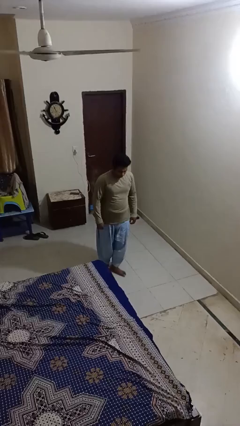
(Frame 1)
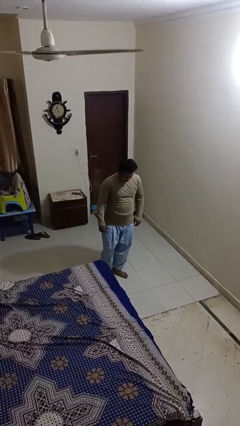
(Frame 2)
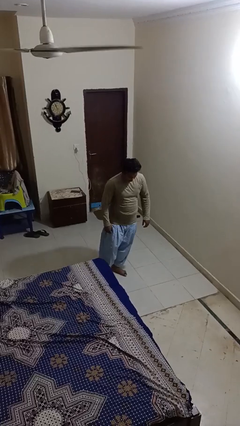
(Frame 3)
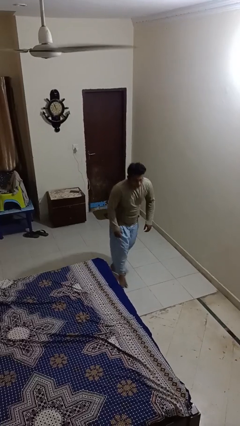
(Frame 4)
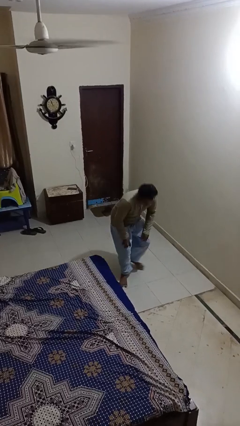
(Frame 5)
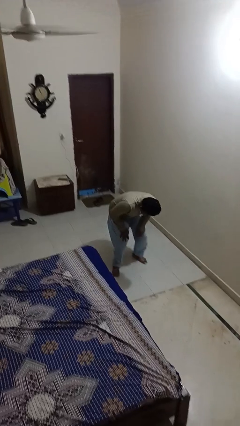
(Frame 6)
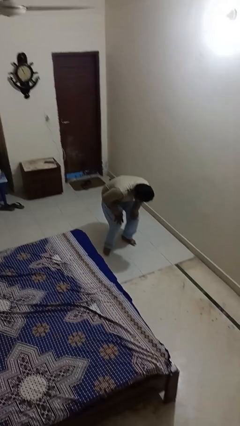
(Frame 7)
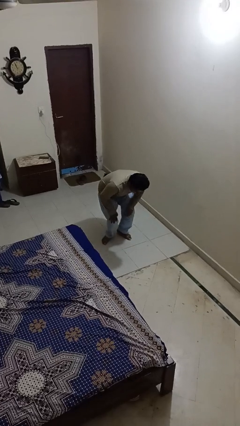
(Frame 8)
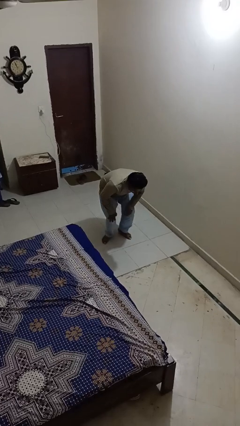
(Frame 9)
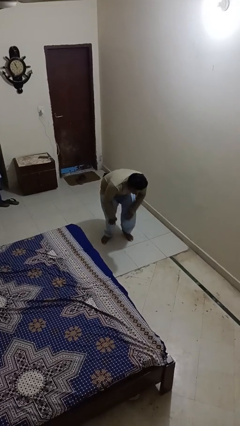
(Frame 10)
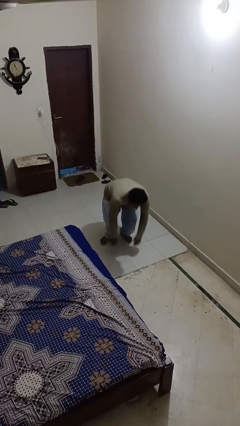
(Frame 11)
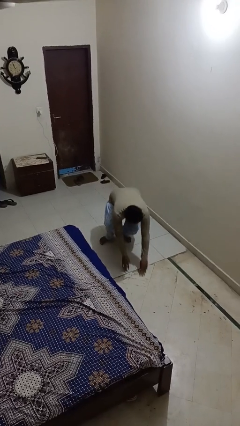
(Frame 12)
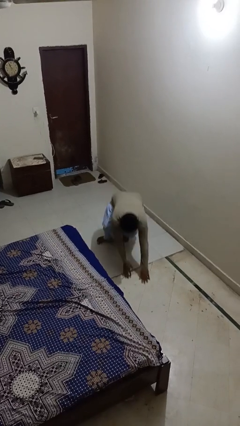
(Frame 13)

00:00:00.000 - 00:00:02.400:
person trips on object on floor

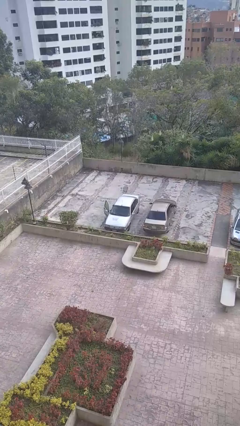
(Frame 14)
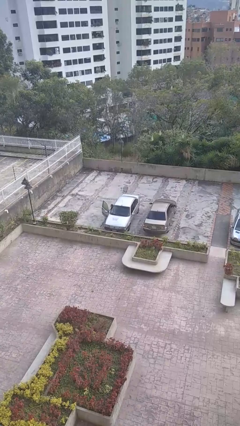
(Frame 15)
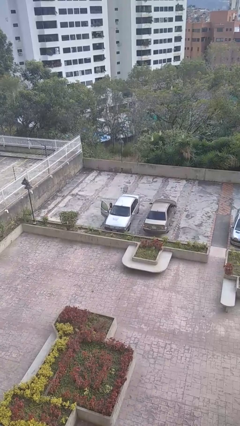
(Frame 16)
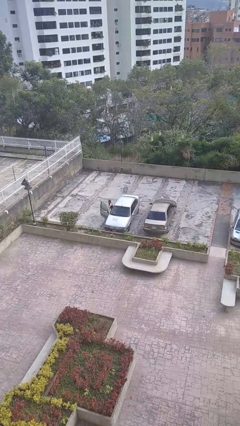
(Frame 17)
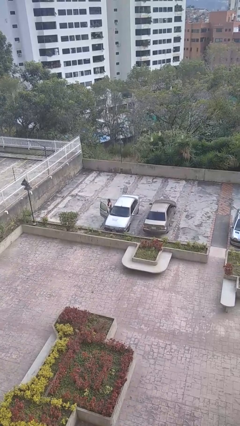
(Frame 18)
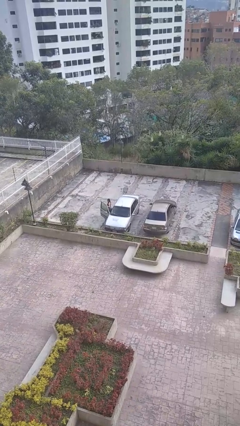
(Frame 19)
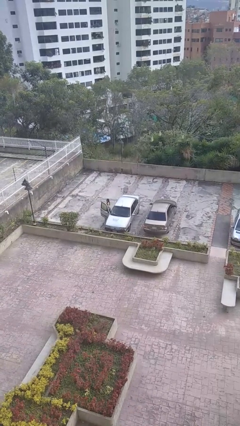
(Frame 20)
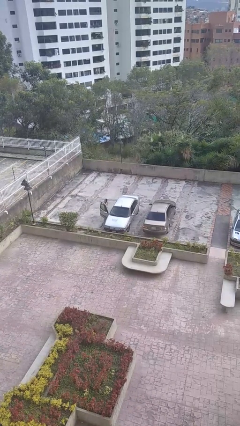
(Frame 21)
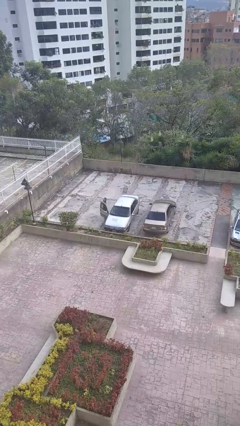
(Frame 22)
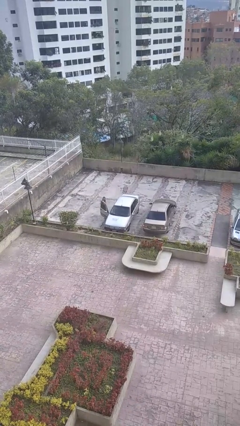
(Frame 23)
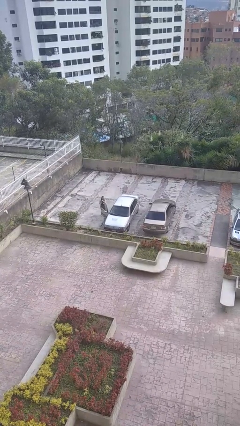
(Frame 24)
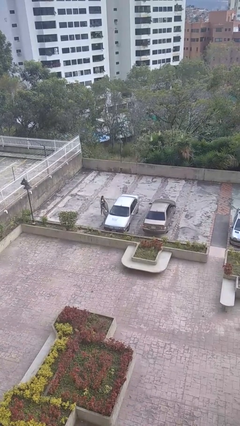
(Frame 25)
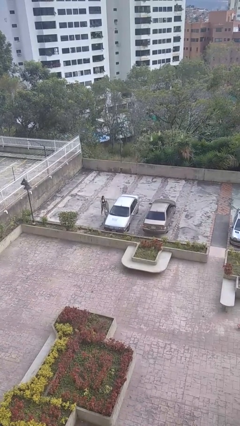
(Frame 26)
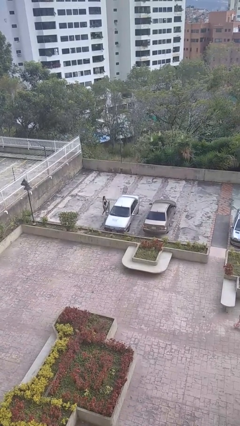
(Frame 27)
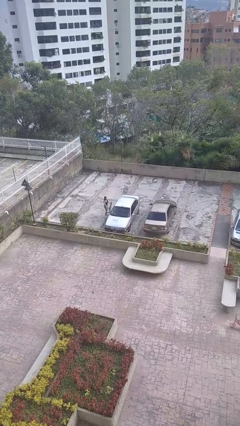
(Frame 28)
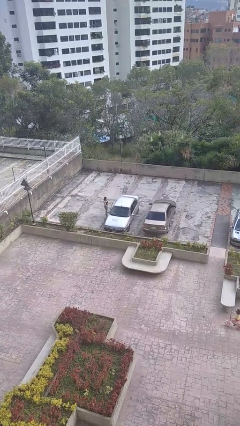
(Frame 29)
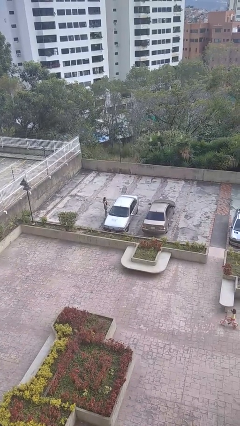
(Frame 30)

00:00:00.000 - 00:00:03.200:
car drops off person

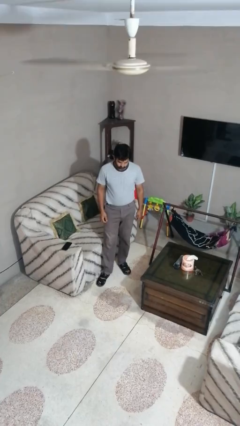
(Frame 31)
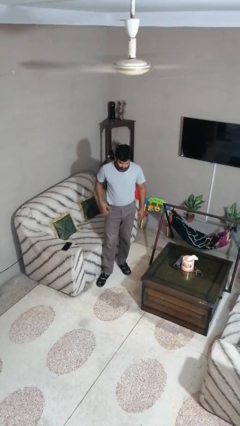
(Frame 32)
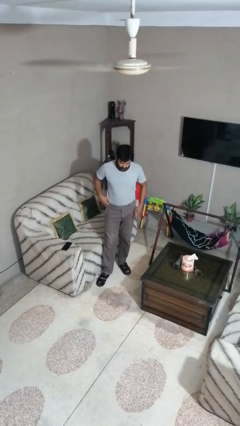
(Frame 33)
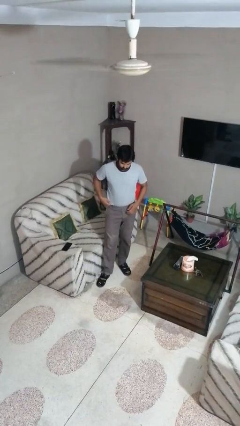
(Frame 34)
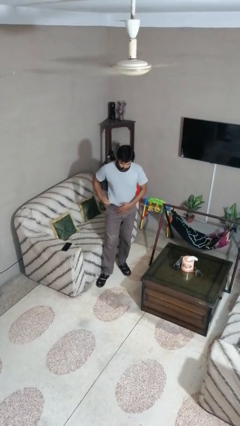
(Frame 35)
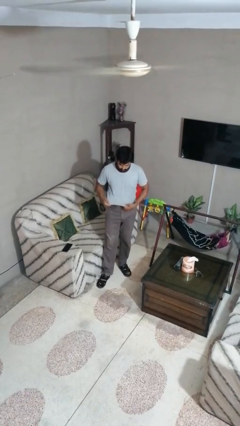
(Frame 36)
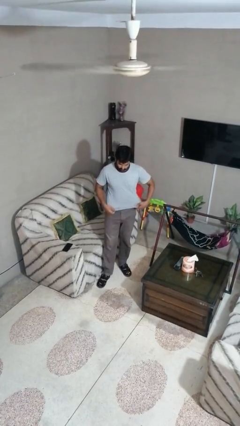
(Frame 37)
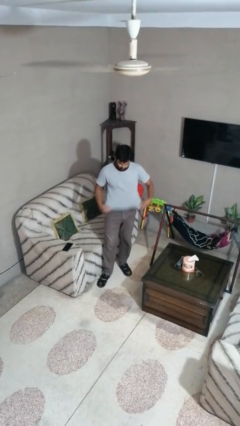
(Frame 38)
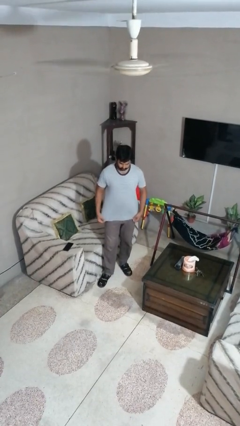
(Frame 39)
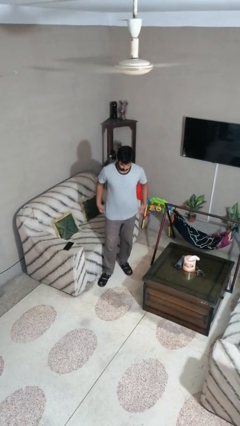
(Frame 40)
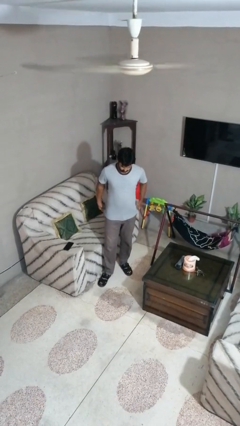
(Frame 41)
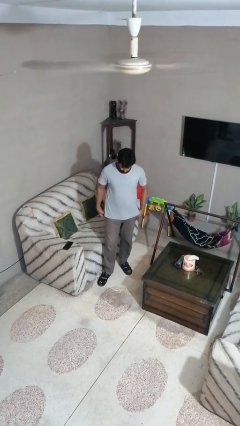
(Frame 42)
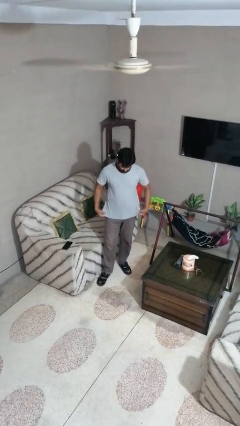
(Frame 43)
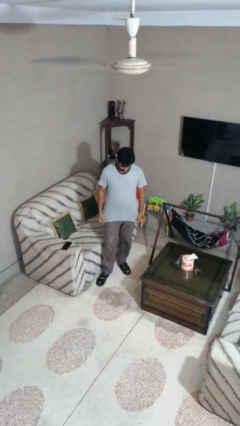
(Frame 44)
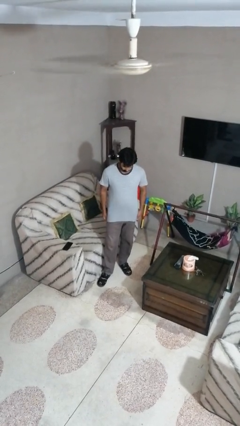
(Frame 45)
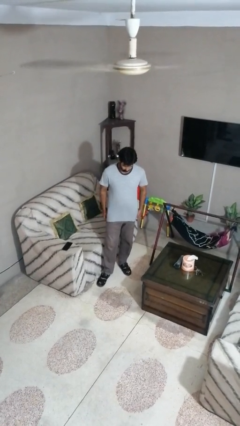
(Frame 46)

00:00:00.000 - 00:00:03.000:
person untucks shirt

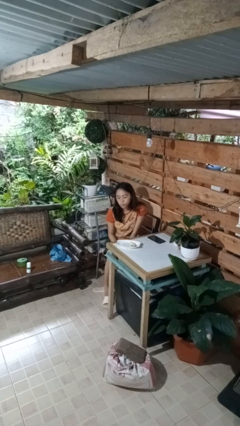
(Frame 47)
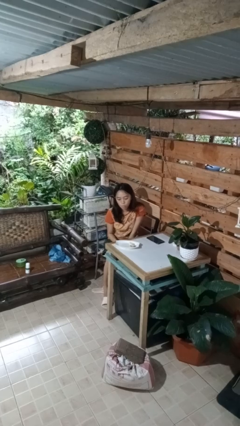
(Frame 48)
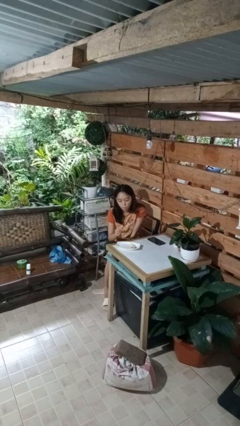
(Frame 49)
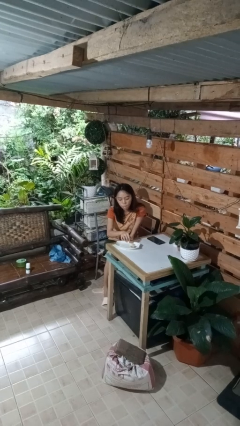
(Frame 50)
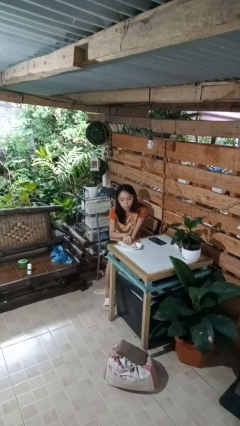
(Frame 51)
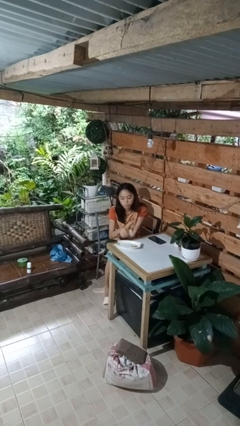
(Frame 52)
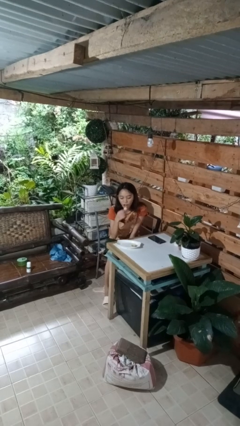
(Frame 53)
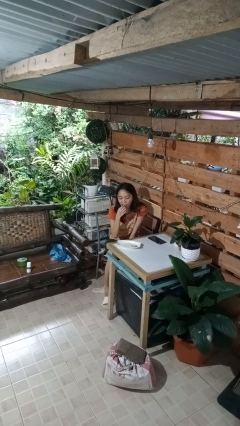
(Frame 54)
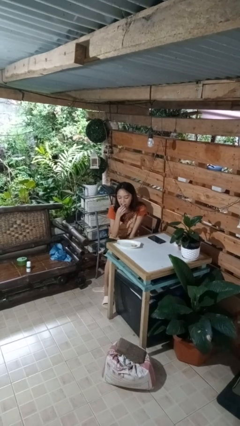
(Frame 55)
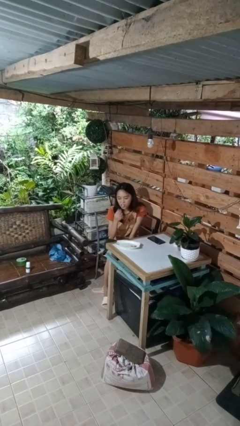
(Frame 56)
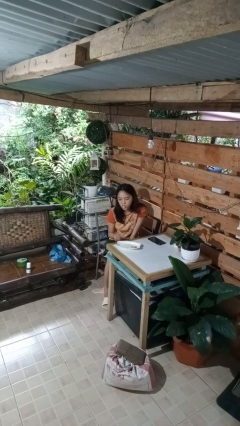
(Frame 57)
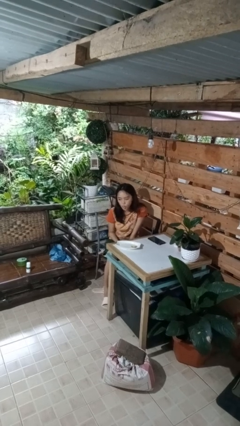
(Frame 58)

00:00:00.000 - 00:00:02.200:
person eats with hands

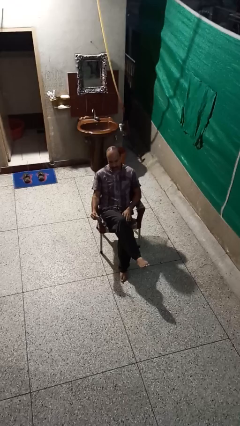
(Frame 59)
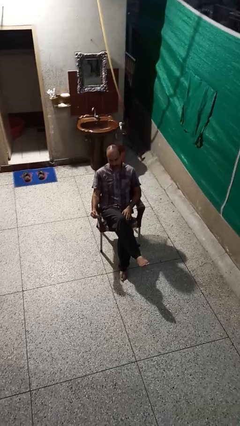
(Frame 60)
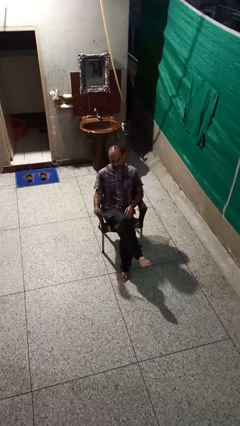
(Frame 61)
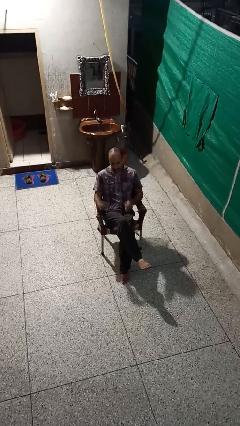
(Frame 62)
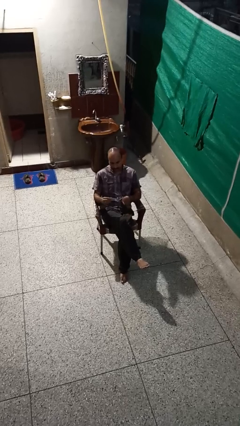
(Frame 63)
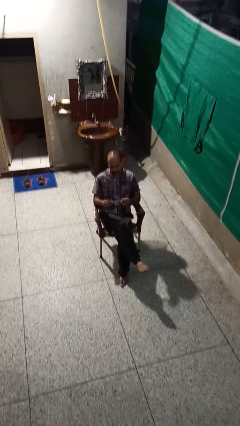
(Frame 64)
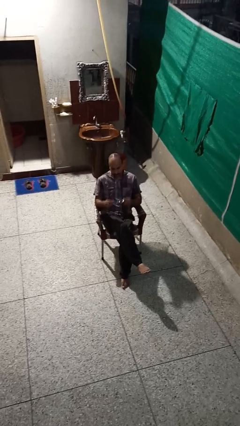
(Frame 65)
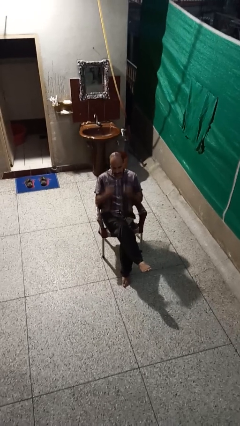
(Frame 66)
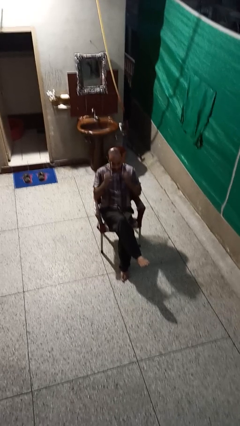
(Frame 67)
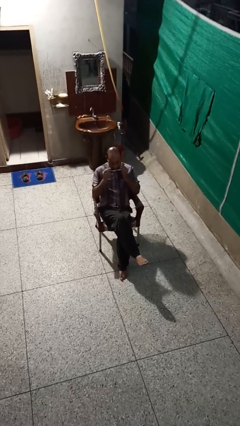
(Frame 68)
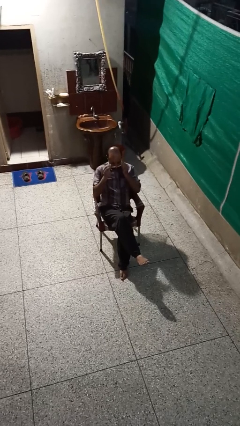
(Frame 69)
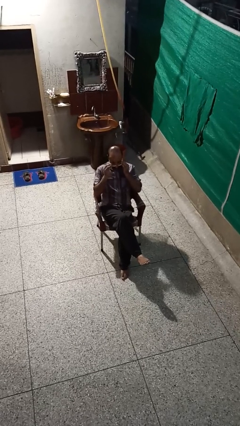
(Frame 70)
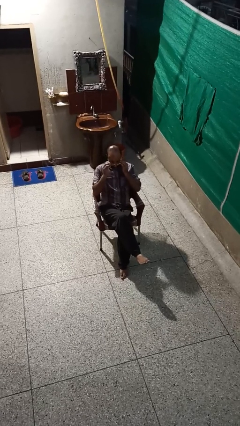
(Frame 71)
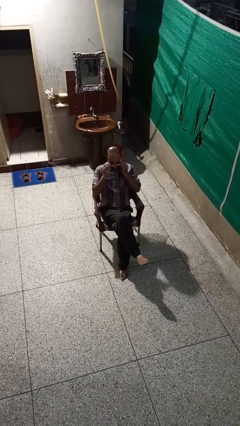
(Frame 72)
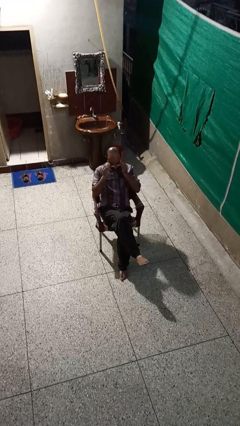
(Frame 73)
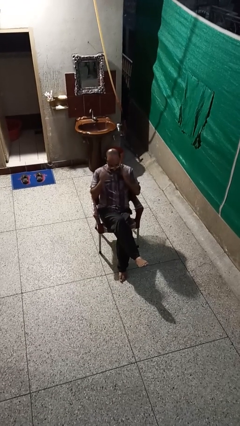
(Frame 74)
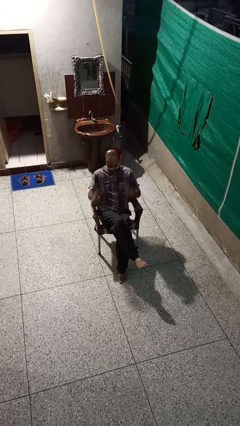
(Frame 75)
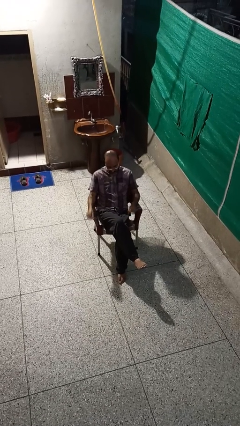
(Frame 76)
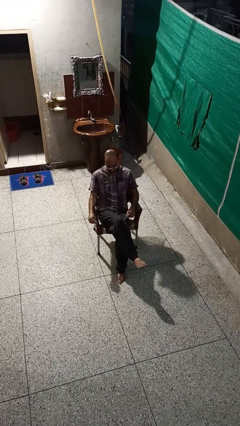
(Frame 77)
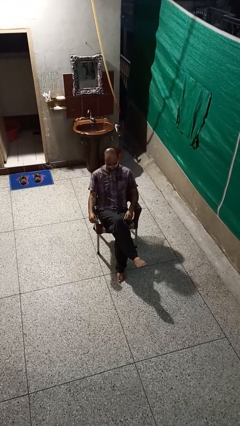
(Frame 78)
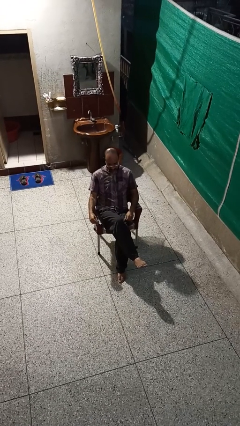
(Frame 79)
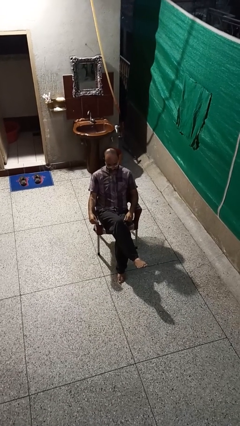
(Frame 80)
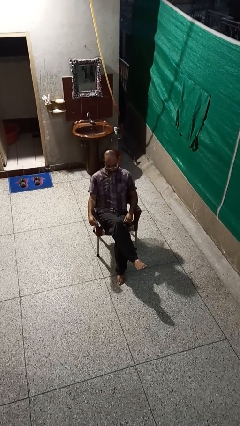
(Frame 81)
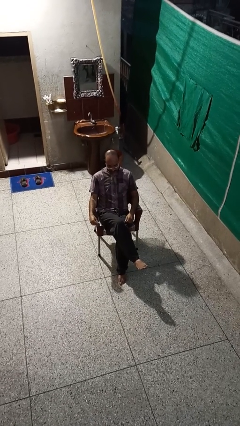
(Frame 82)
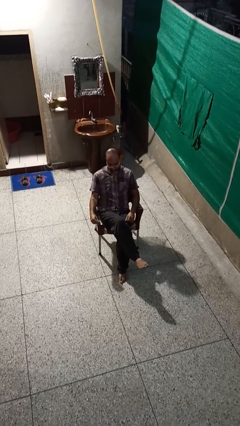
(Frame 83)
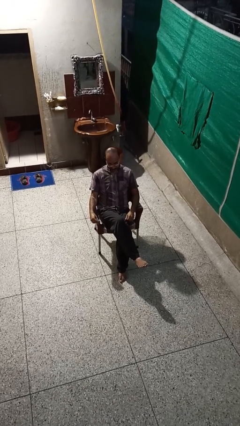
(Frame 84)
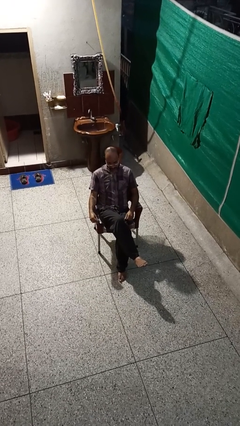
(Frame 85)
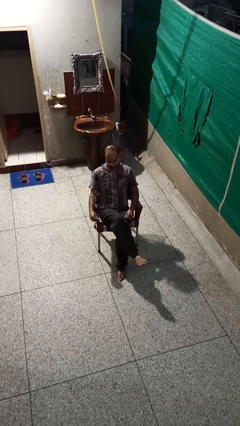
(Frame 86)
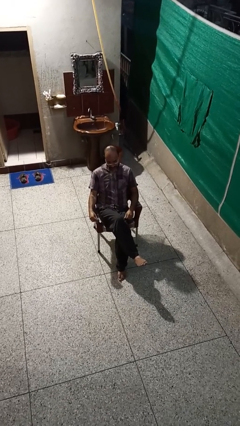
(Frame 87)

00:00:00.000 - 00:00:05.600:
person puts on glasses

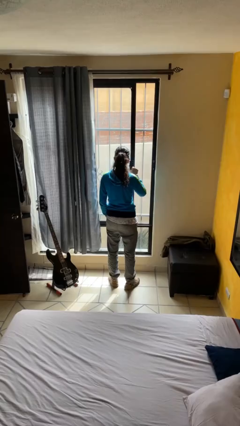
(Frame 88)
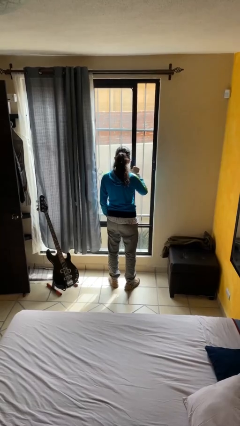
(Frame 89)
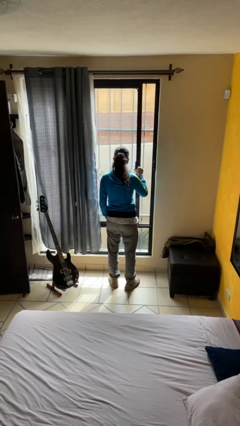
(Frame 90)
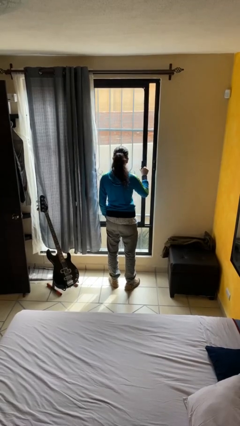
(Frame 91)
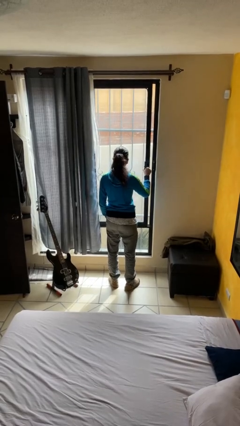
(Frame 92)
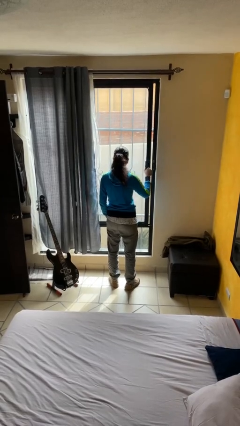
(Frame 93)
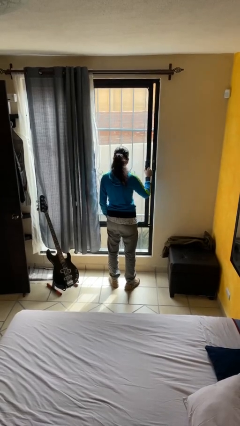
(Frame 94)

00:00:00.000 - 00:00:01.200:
person closes home window
